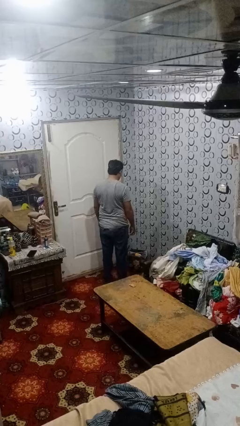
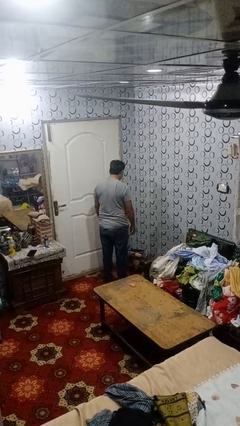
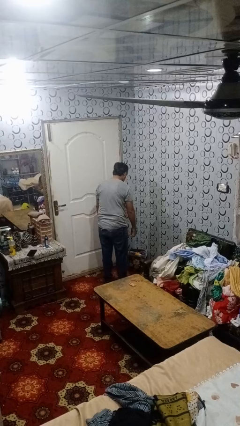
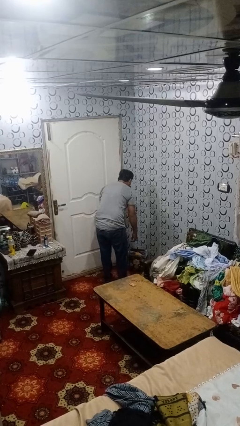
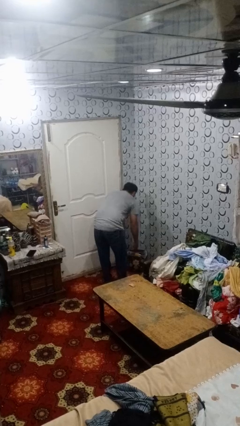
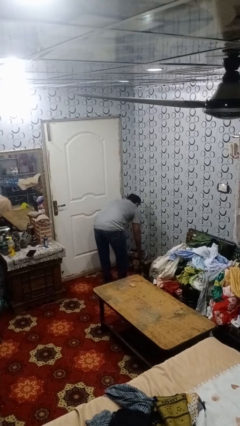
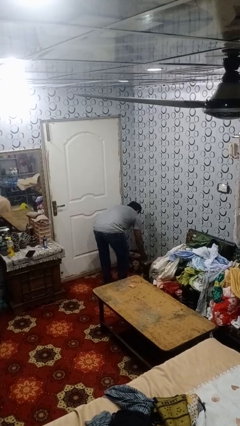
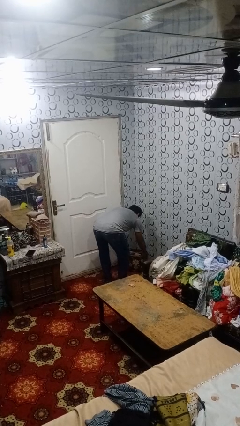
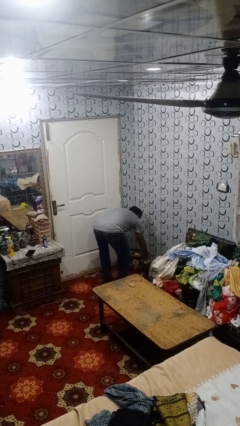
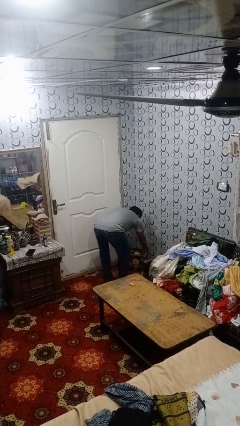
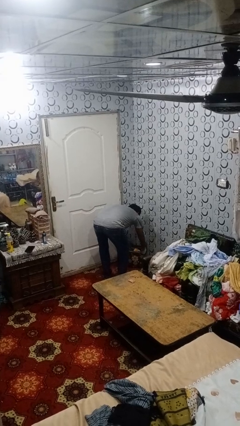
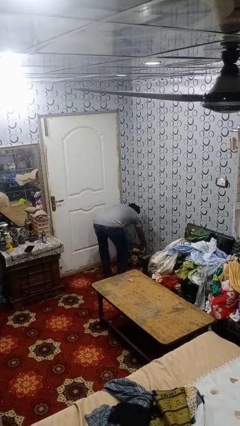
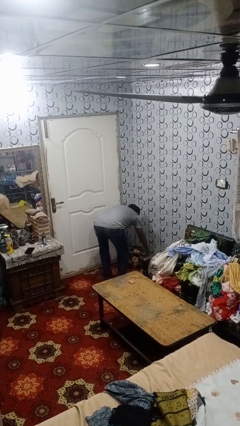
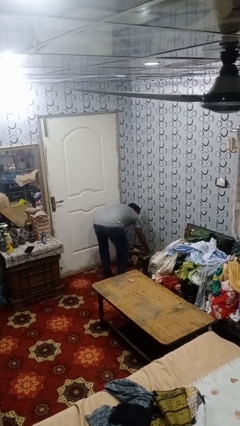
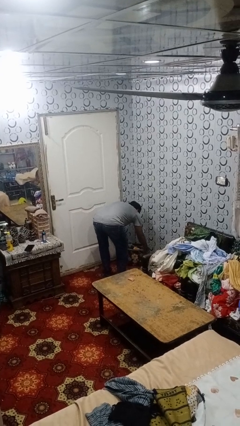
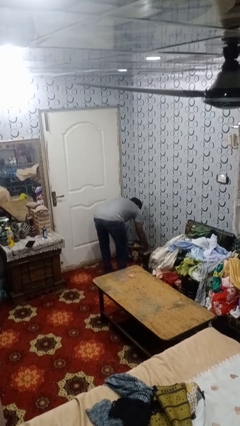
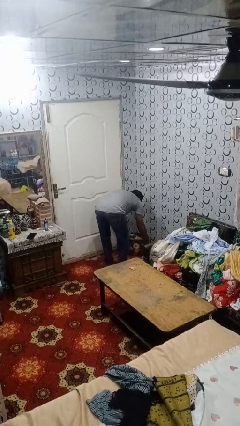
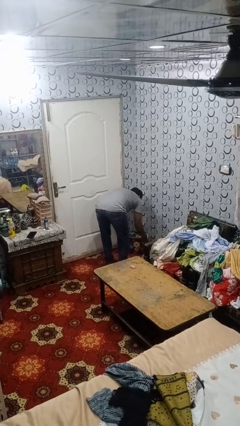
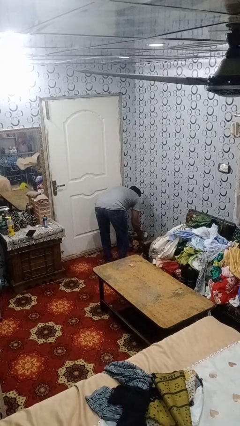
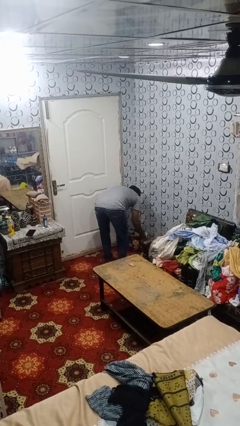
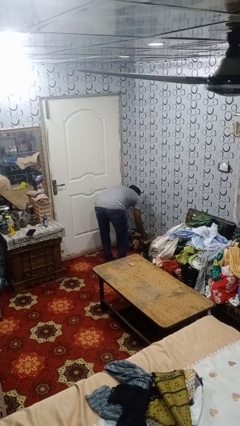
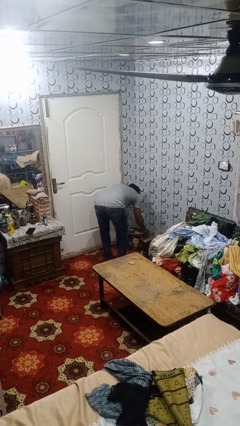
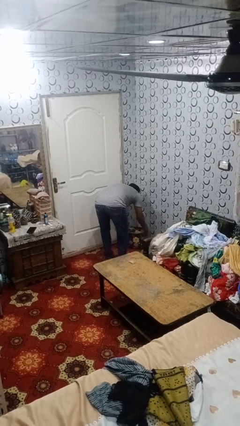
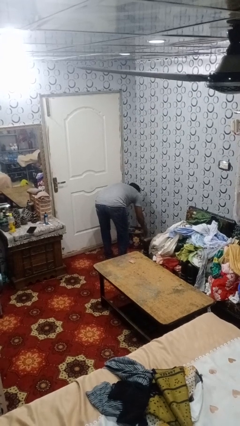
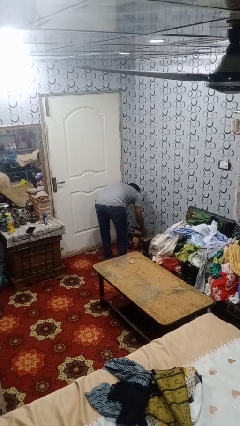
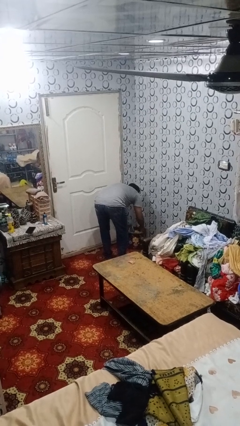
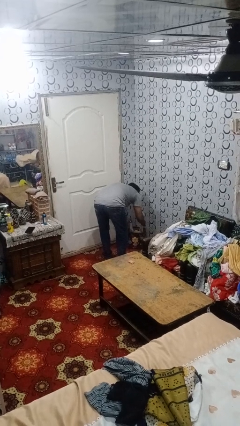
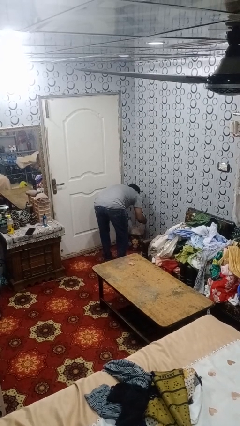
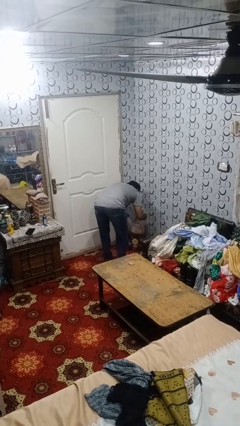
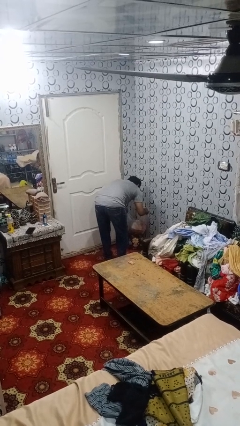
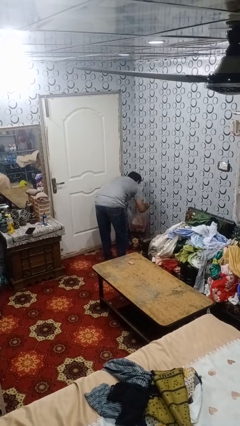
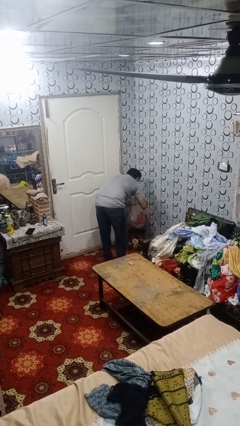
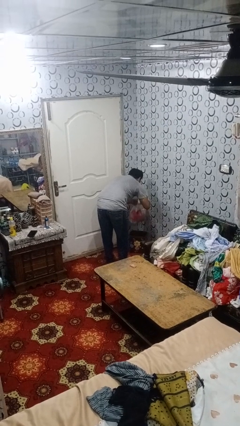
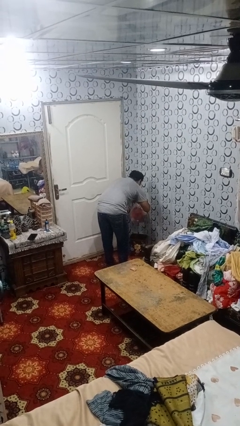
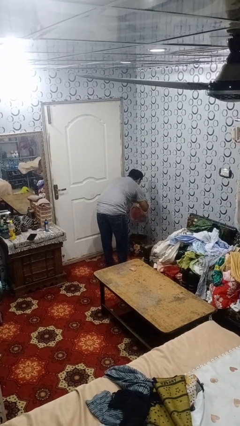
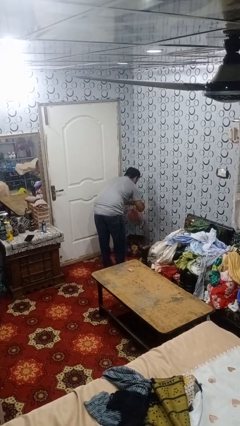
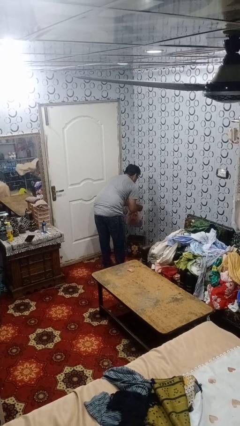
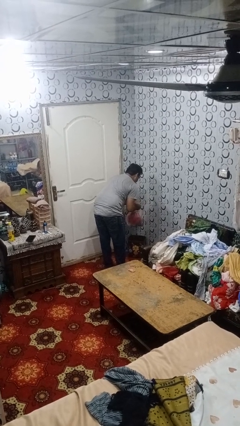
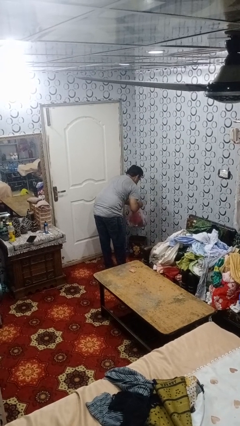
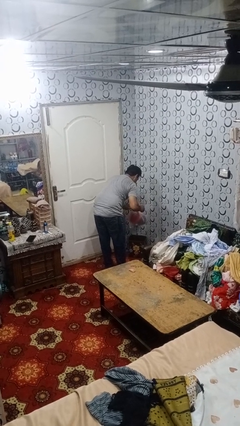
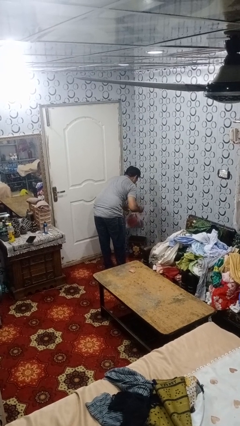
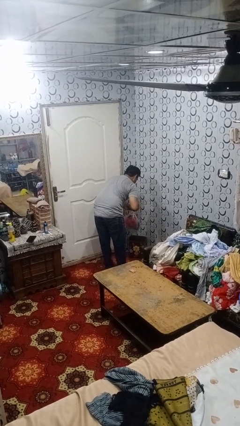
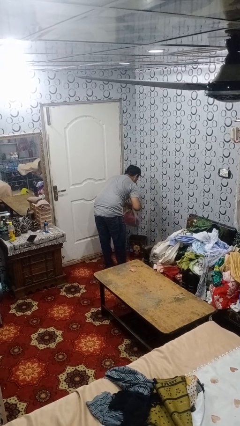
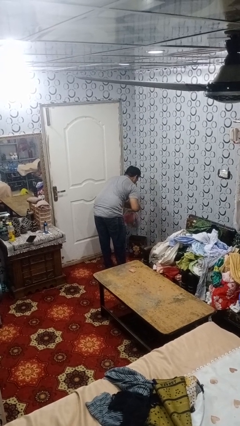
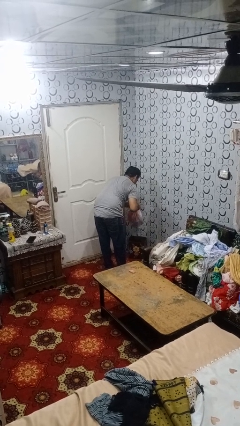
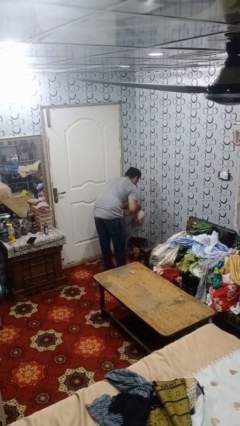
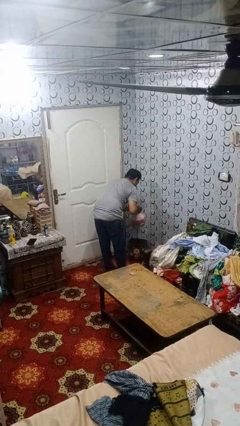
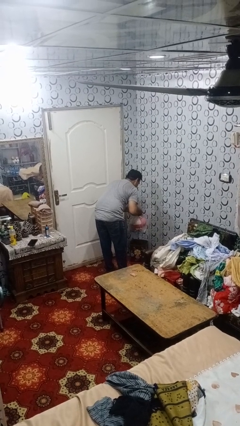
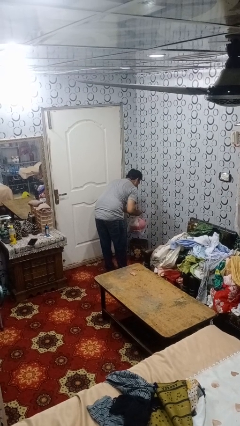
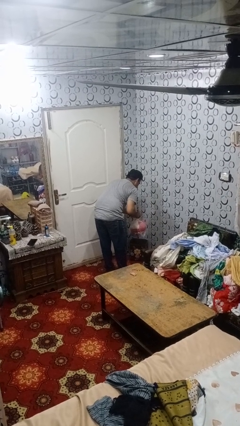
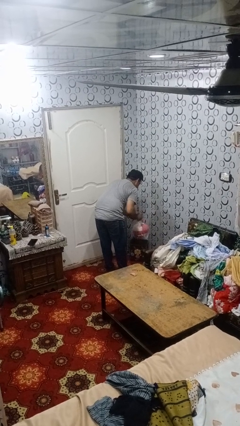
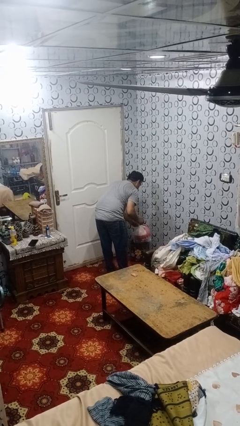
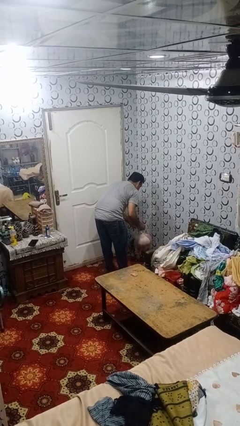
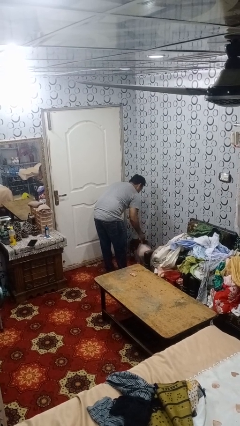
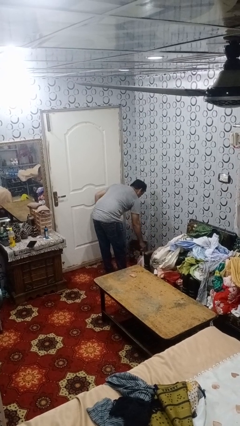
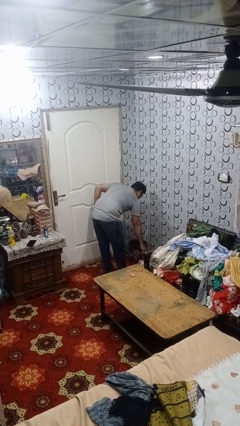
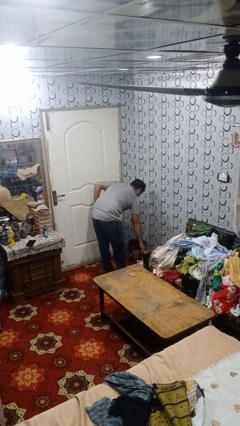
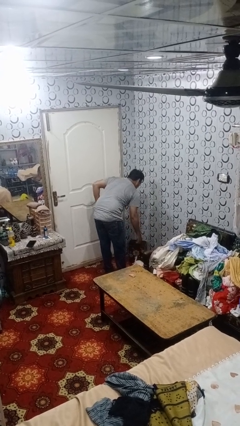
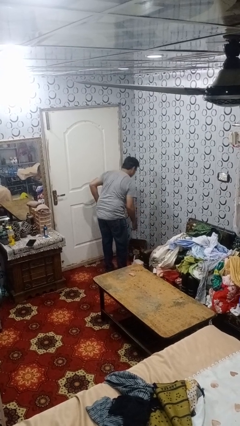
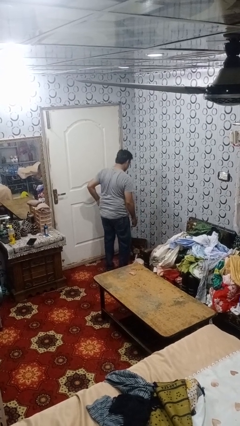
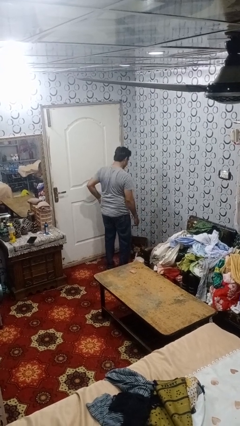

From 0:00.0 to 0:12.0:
person removes trashbag from trashcan

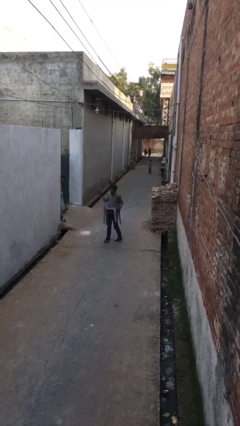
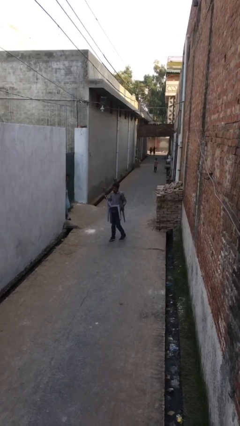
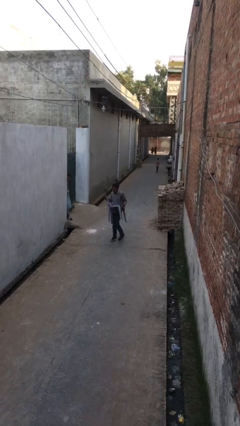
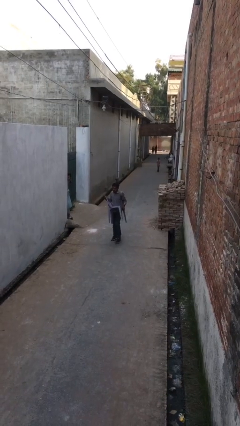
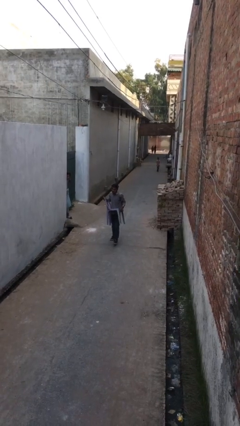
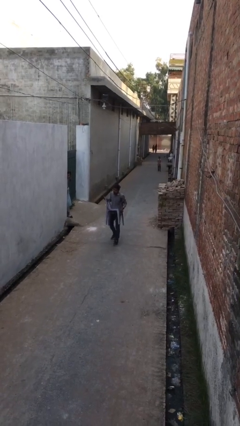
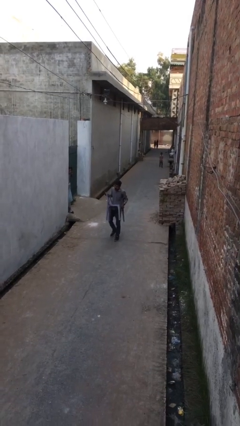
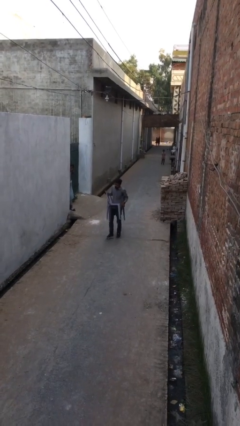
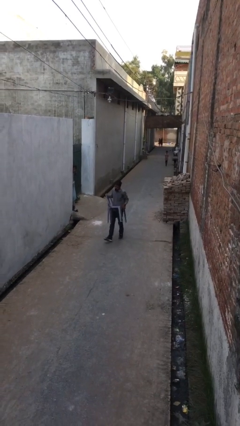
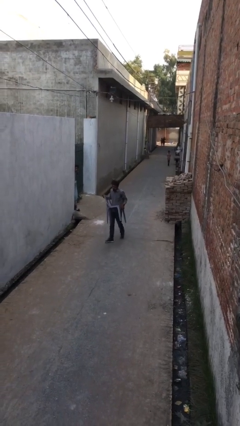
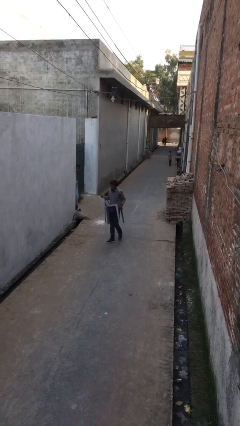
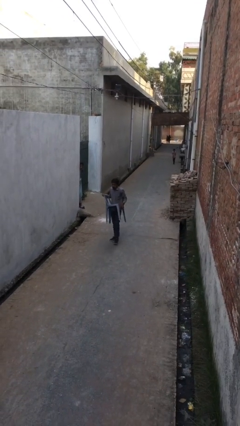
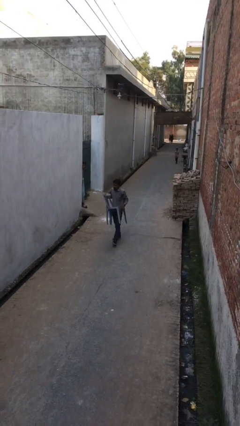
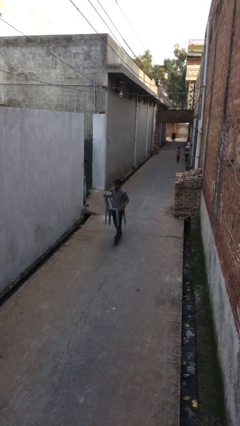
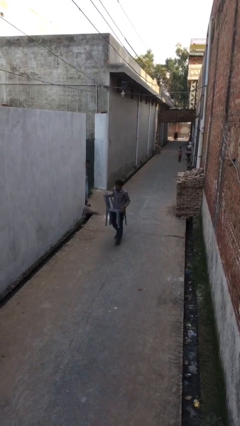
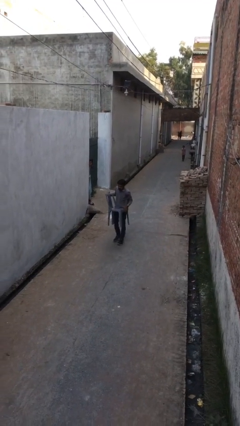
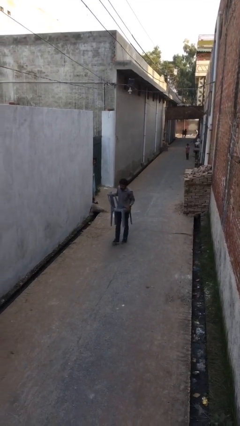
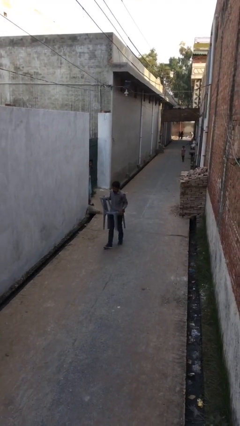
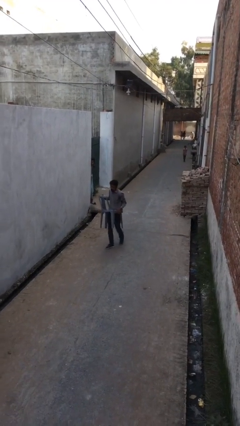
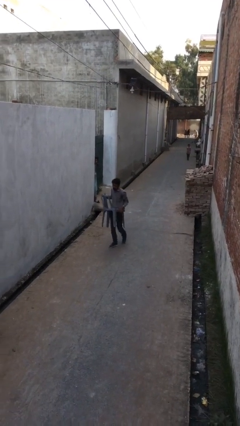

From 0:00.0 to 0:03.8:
person carries heavy object

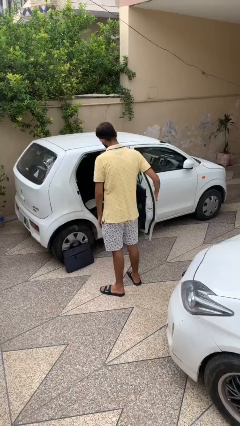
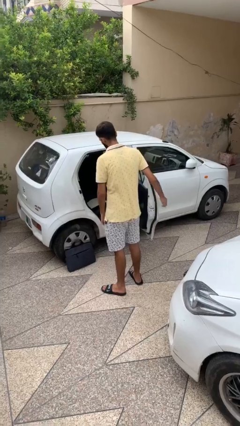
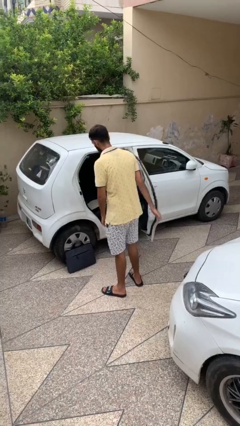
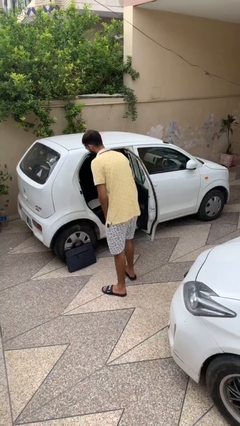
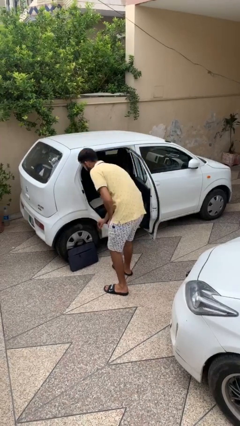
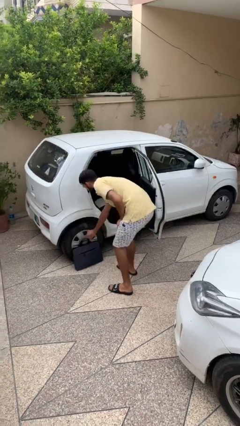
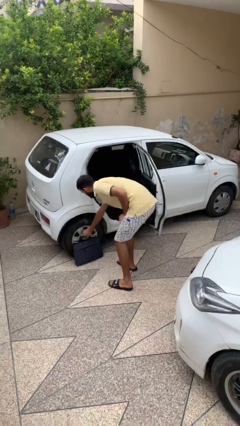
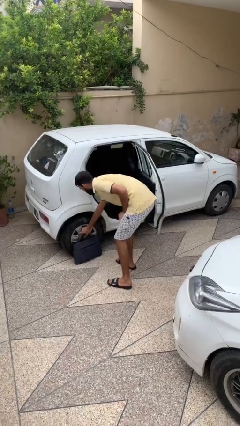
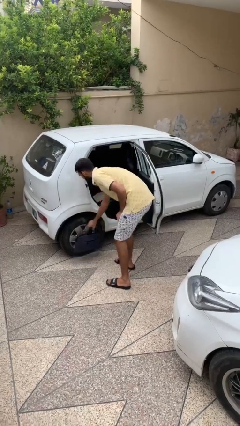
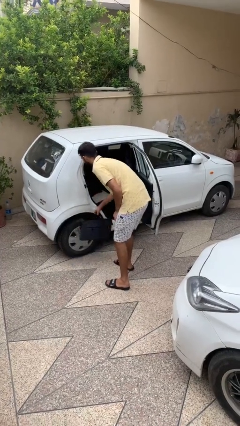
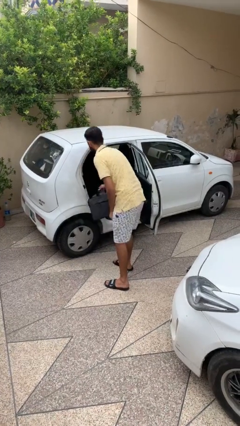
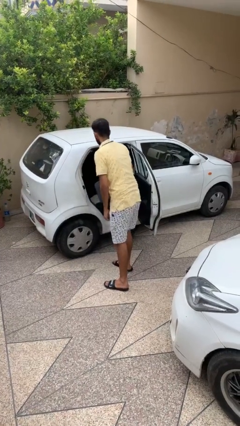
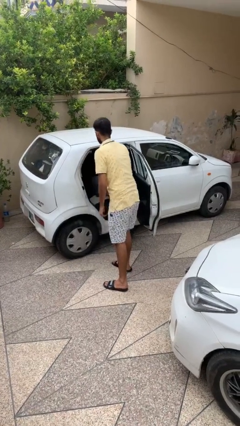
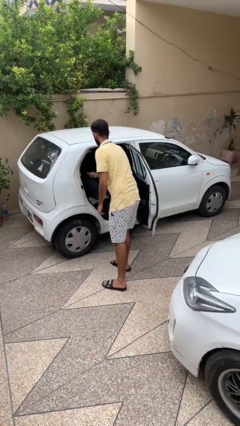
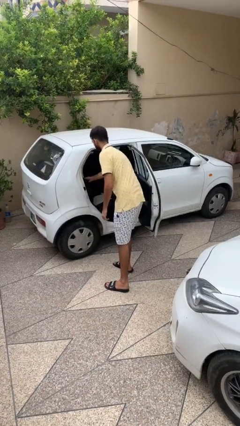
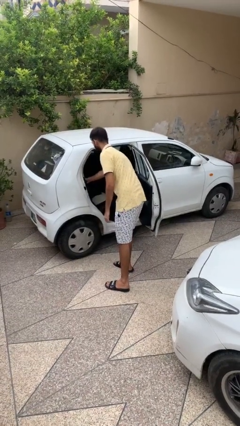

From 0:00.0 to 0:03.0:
person loads car
